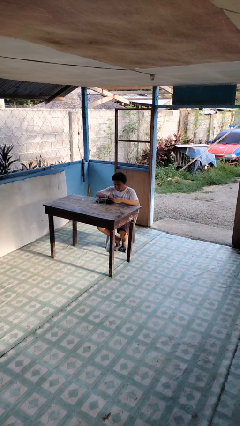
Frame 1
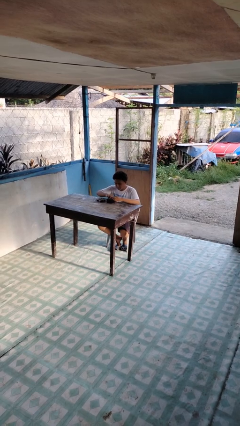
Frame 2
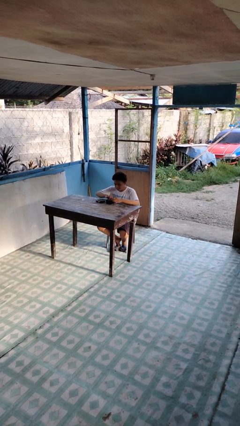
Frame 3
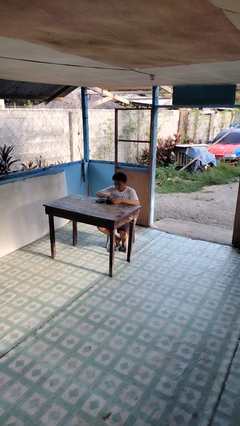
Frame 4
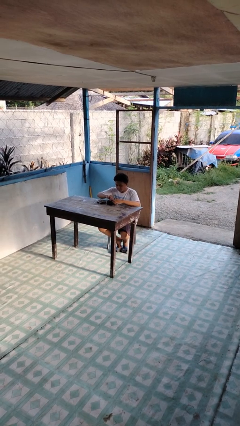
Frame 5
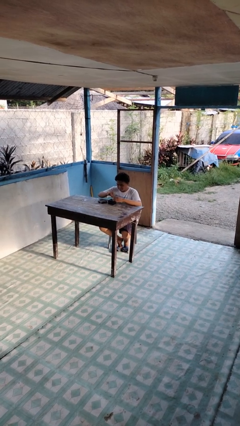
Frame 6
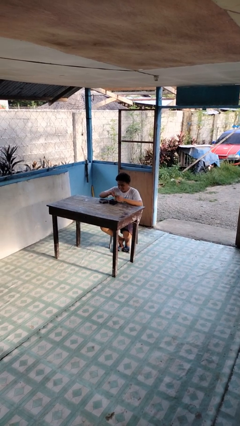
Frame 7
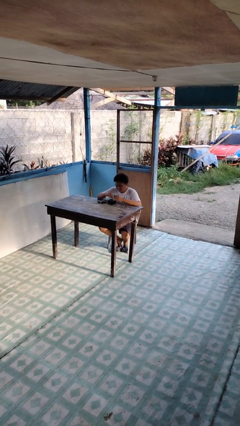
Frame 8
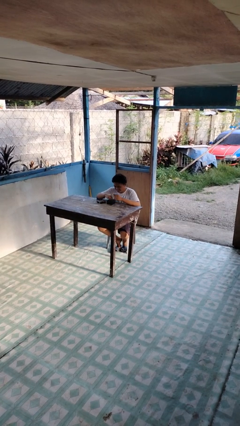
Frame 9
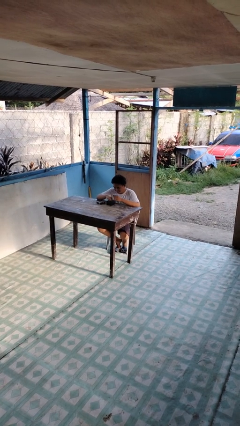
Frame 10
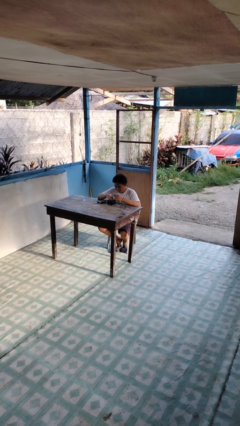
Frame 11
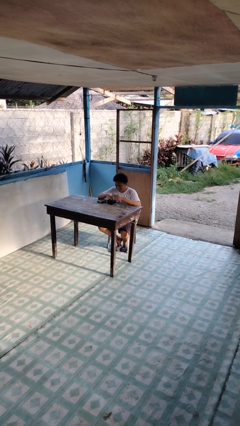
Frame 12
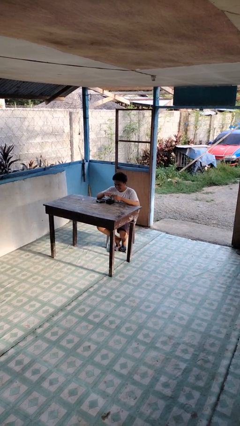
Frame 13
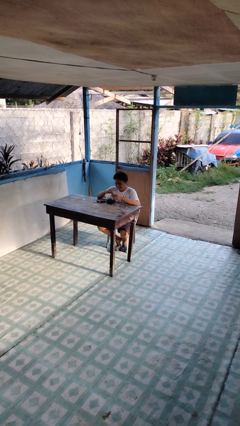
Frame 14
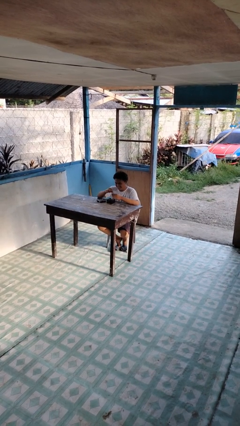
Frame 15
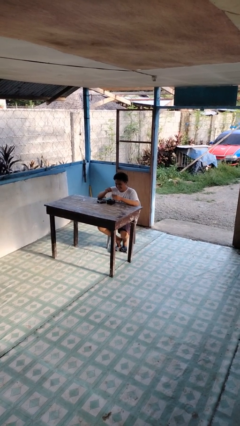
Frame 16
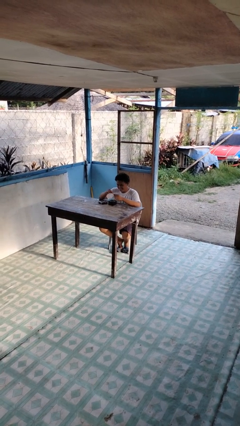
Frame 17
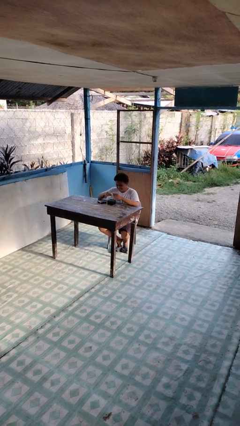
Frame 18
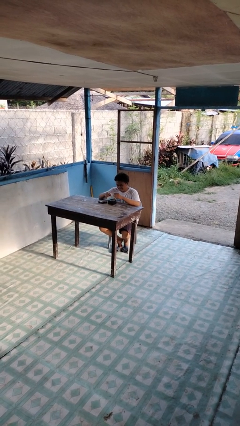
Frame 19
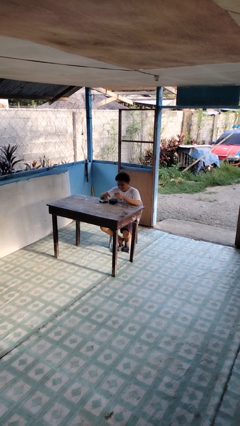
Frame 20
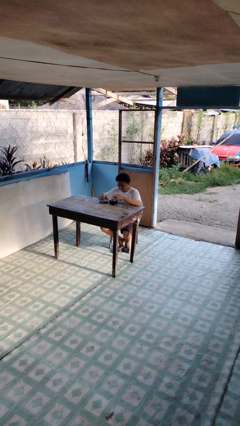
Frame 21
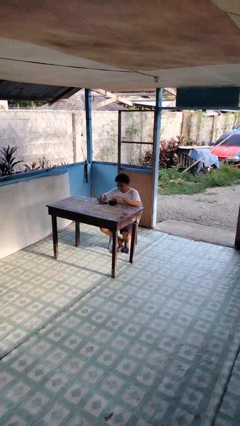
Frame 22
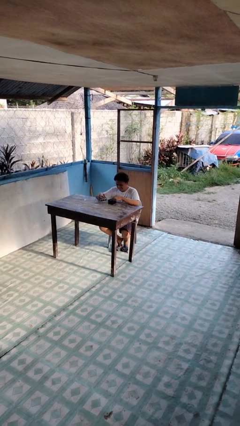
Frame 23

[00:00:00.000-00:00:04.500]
person searches jewelry box

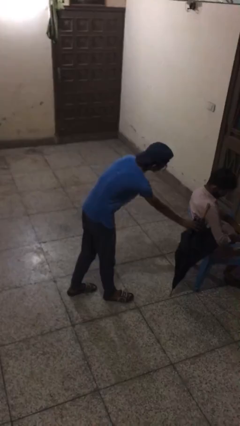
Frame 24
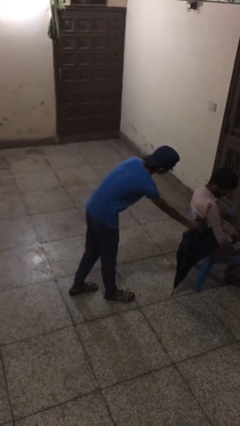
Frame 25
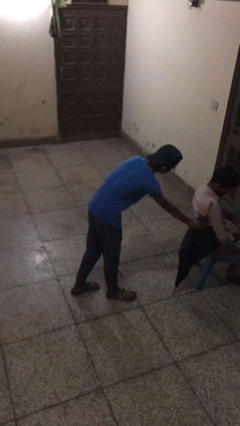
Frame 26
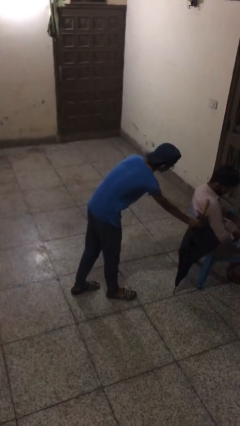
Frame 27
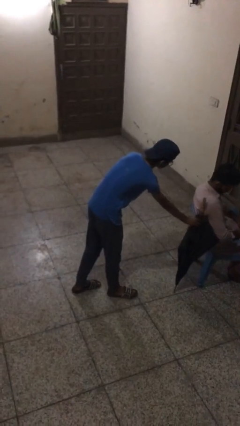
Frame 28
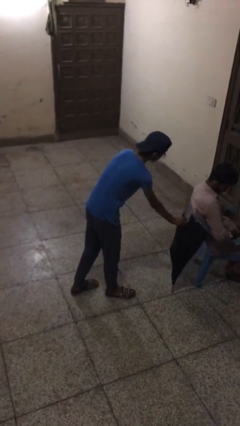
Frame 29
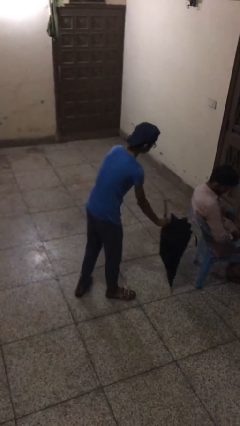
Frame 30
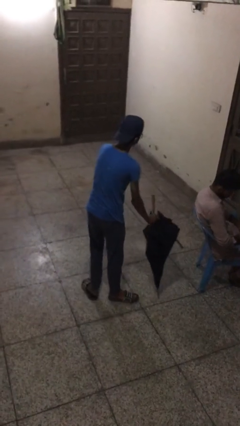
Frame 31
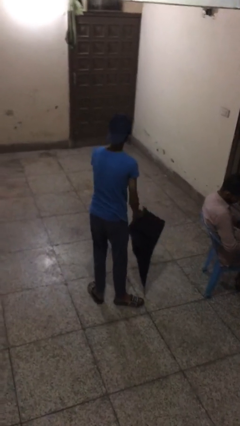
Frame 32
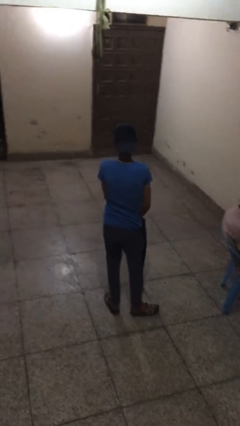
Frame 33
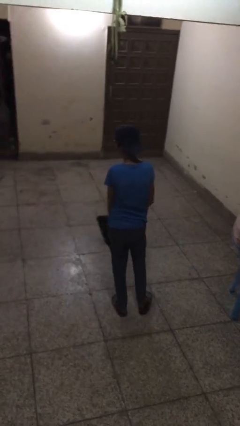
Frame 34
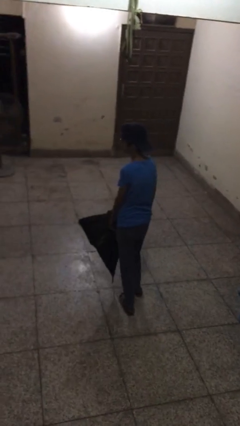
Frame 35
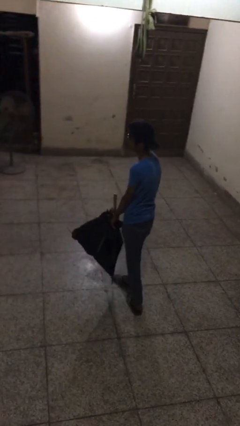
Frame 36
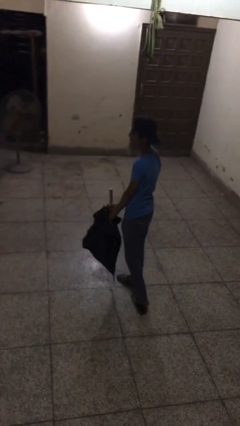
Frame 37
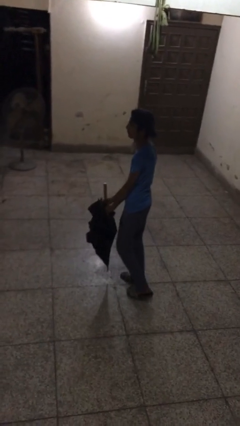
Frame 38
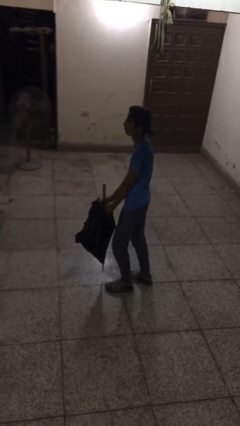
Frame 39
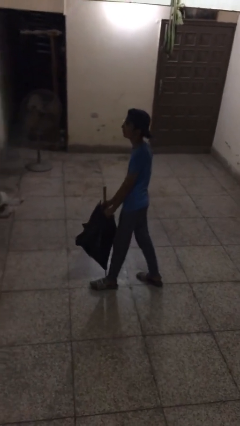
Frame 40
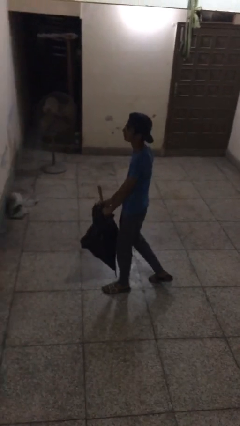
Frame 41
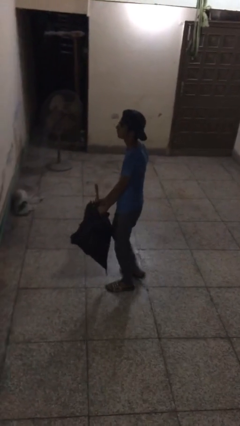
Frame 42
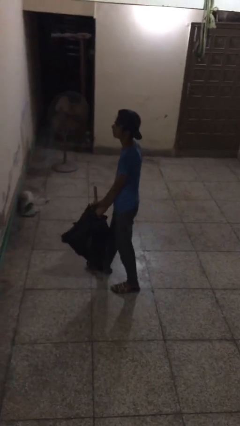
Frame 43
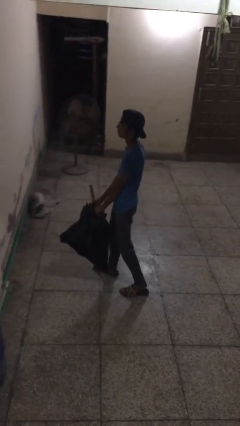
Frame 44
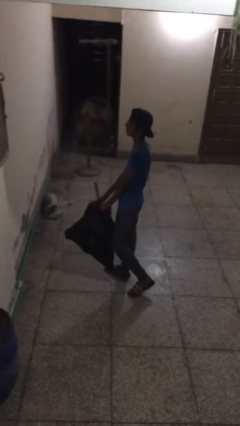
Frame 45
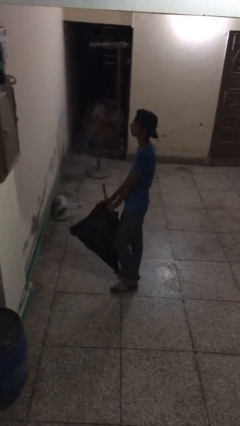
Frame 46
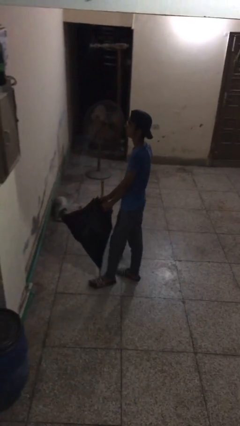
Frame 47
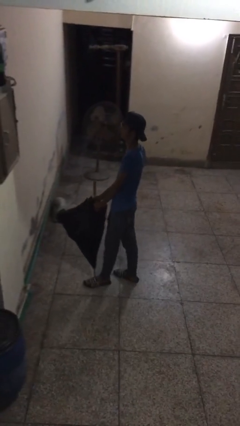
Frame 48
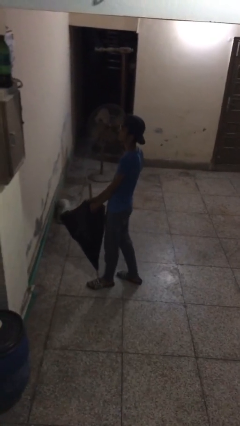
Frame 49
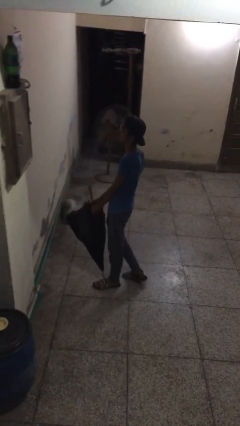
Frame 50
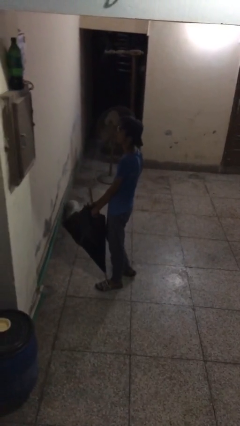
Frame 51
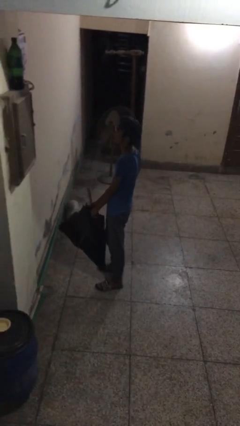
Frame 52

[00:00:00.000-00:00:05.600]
person steals object from person

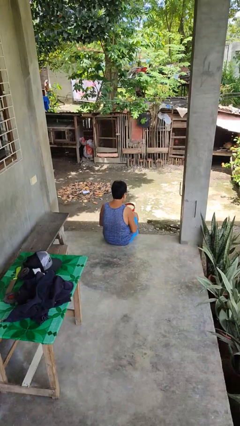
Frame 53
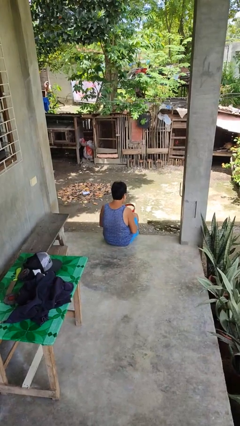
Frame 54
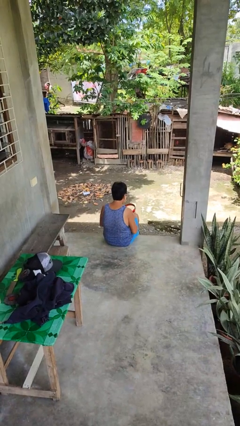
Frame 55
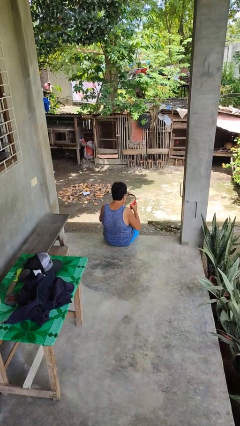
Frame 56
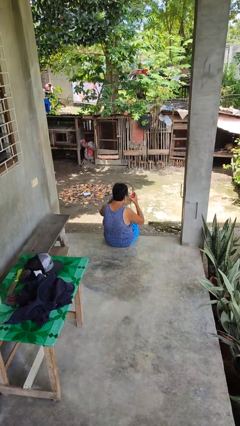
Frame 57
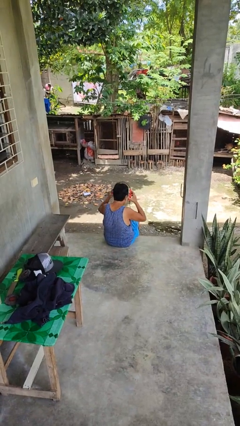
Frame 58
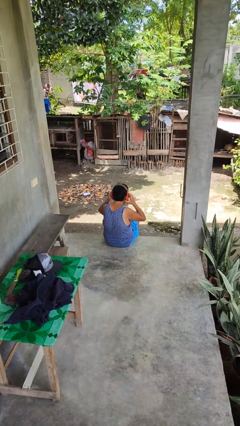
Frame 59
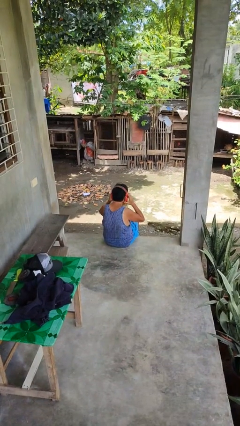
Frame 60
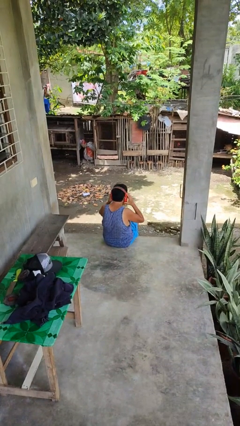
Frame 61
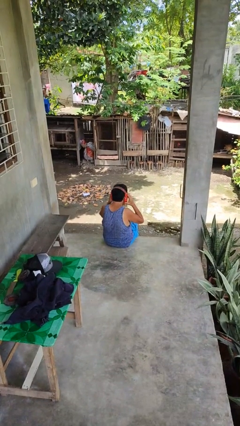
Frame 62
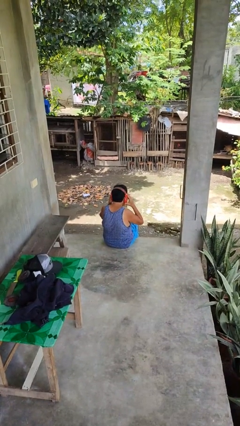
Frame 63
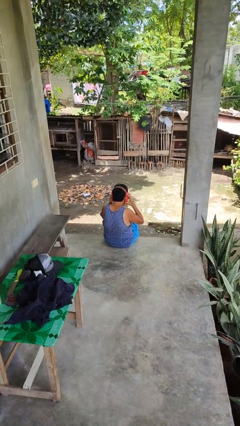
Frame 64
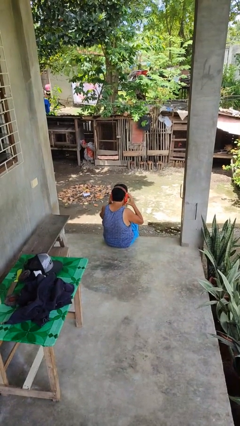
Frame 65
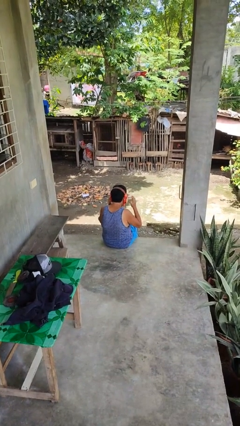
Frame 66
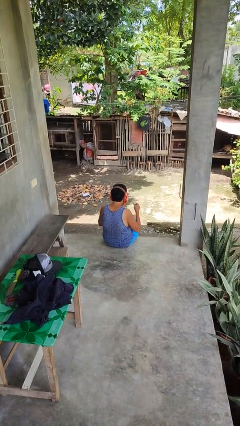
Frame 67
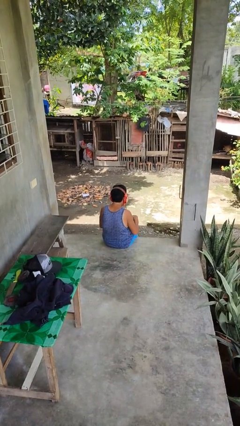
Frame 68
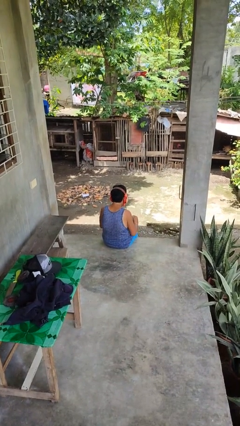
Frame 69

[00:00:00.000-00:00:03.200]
person puts on headphones

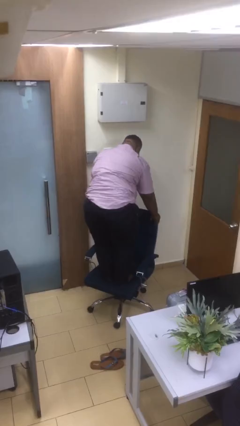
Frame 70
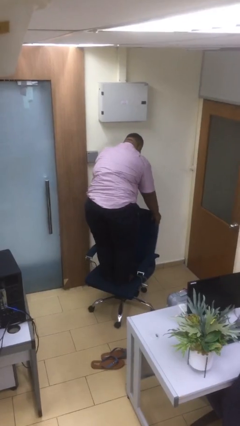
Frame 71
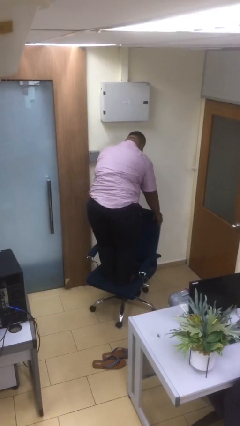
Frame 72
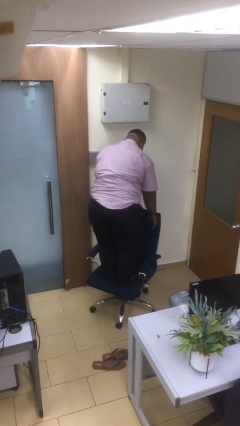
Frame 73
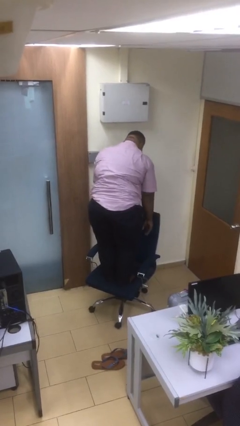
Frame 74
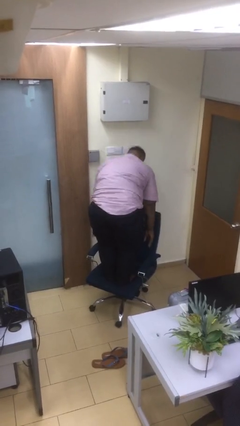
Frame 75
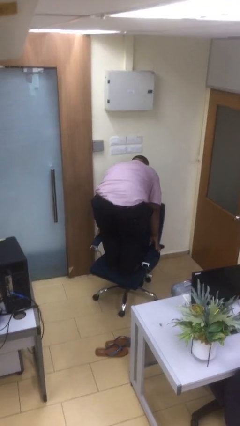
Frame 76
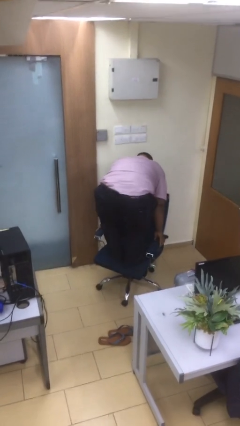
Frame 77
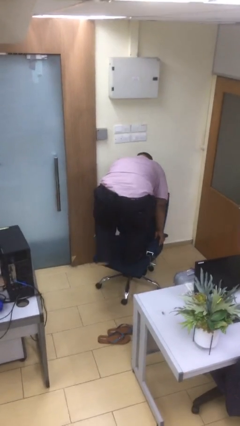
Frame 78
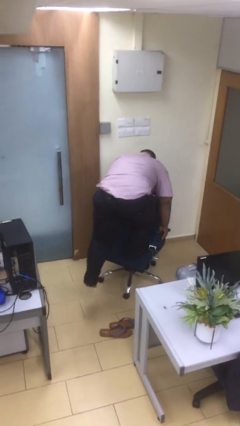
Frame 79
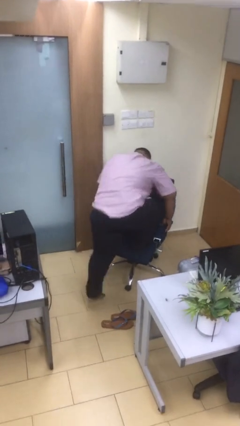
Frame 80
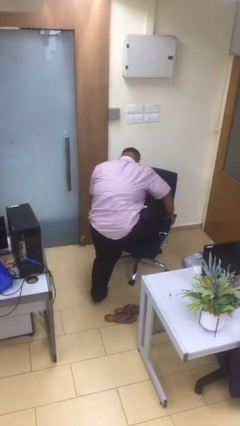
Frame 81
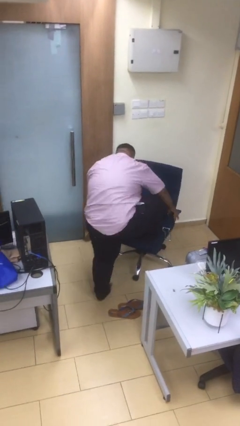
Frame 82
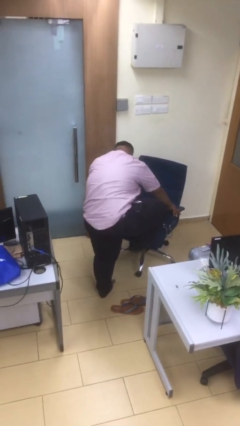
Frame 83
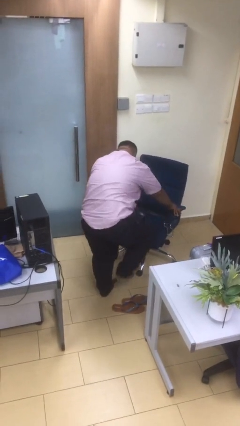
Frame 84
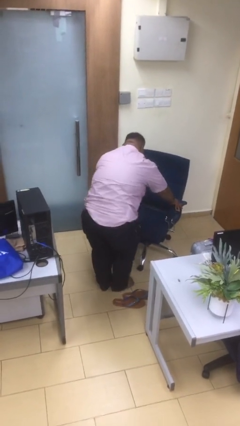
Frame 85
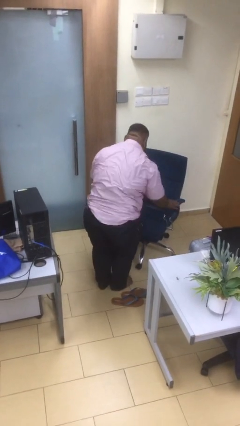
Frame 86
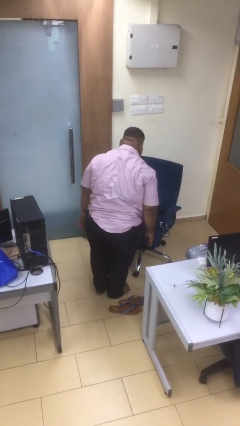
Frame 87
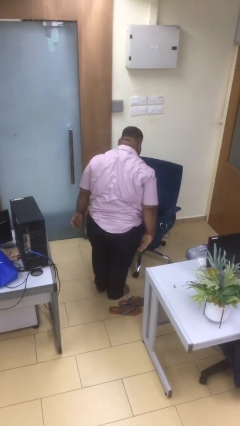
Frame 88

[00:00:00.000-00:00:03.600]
person climbs off chair

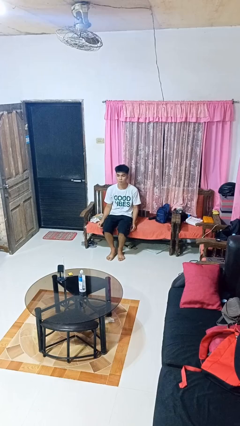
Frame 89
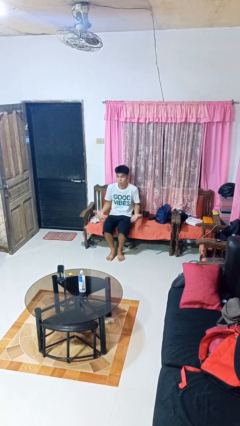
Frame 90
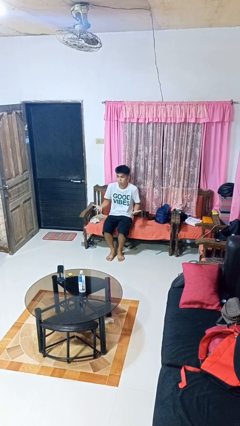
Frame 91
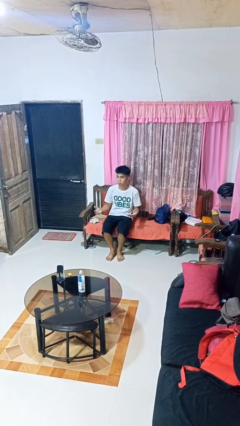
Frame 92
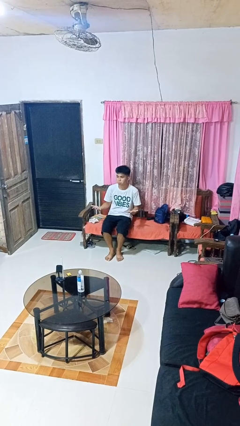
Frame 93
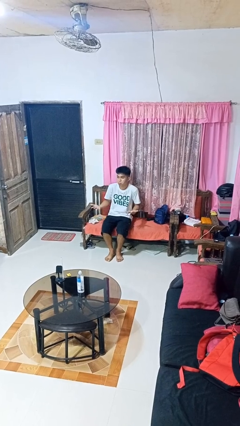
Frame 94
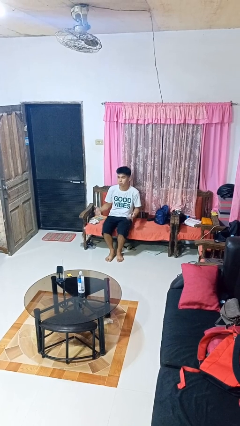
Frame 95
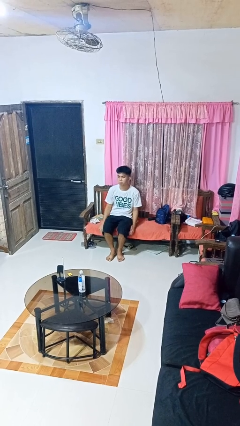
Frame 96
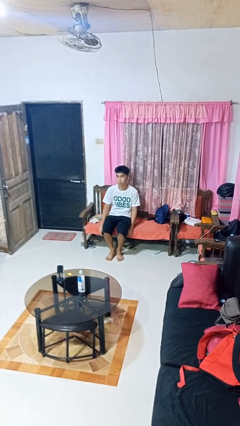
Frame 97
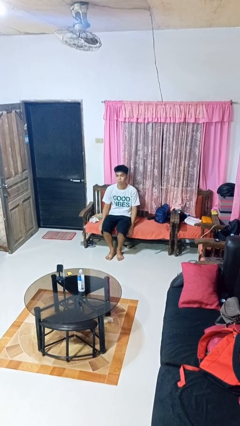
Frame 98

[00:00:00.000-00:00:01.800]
person shrugs
